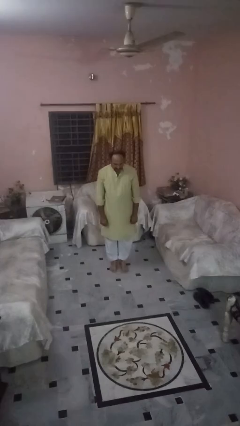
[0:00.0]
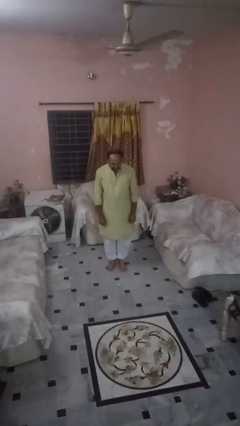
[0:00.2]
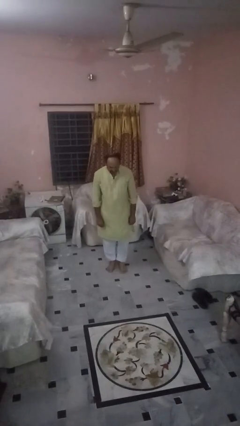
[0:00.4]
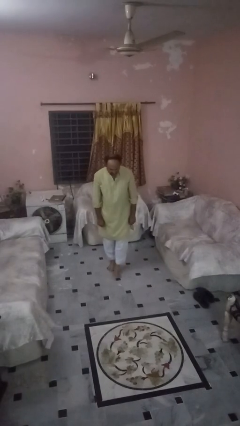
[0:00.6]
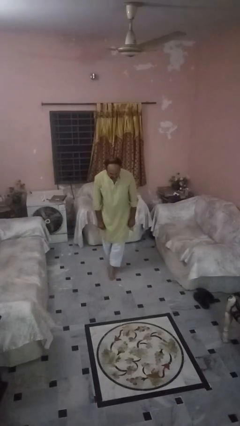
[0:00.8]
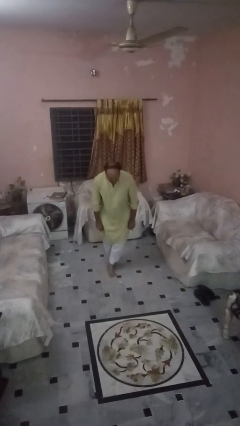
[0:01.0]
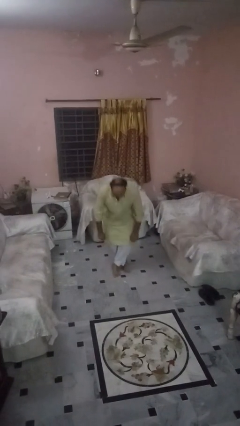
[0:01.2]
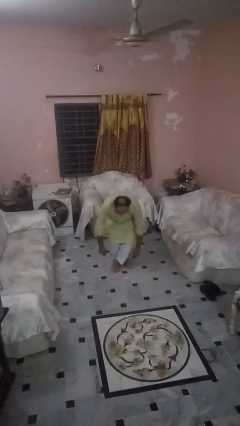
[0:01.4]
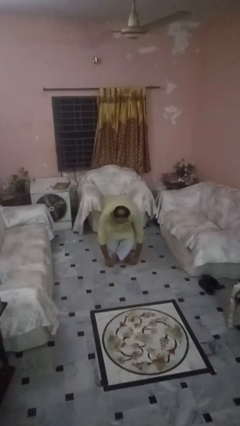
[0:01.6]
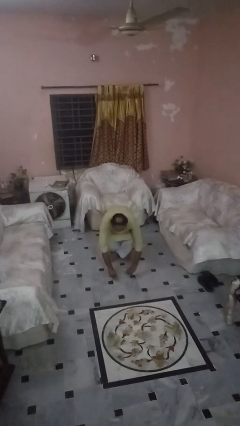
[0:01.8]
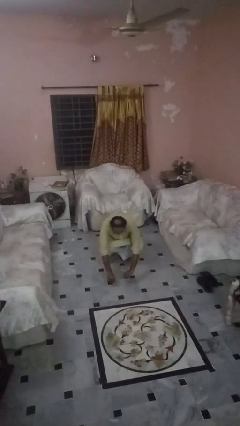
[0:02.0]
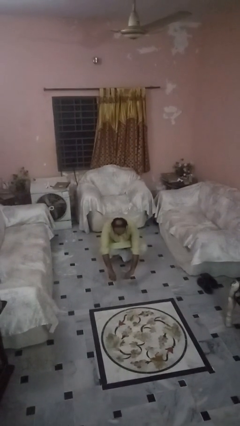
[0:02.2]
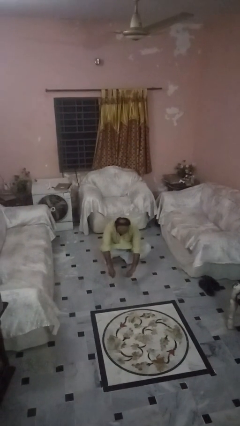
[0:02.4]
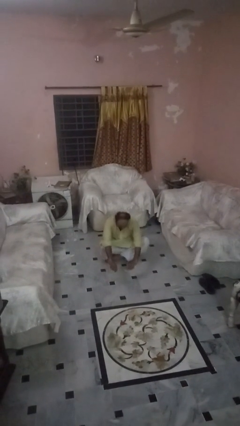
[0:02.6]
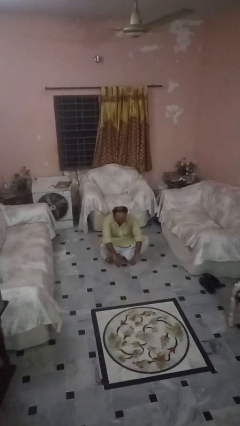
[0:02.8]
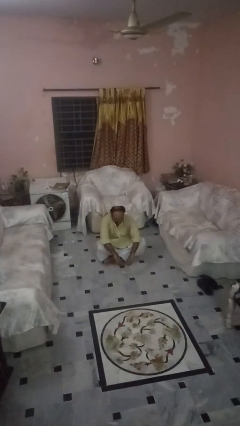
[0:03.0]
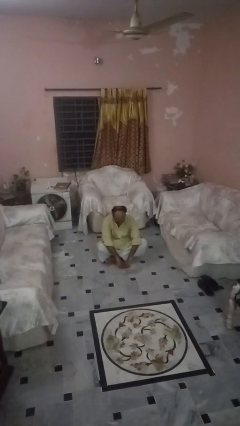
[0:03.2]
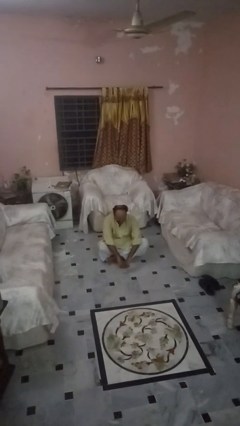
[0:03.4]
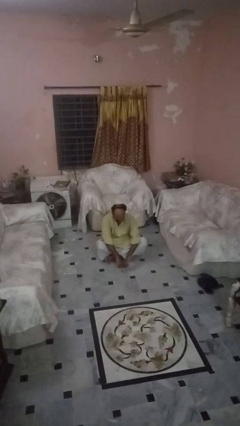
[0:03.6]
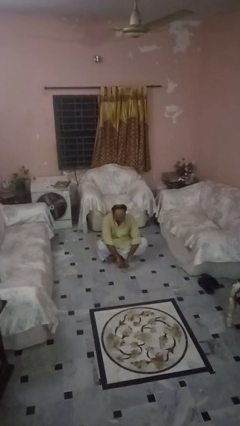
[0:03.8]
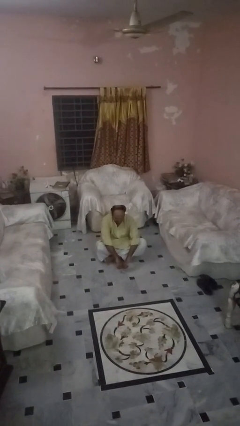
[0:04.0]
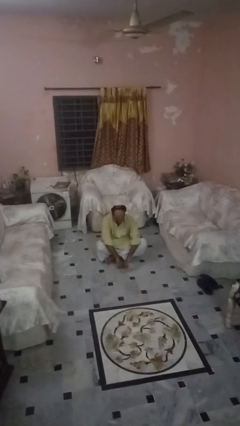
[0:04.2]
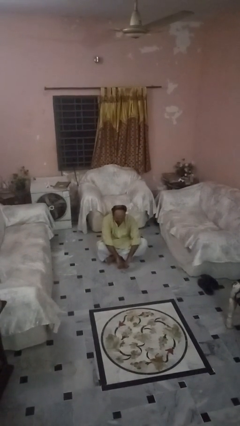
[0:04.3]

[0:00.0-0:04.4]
person sits crisscross

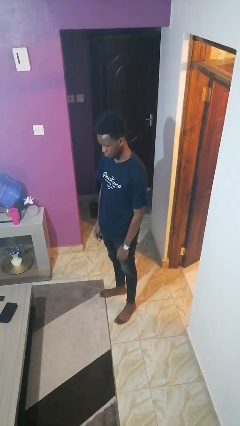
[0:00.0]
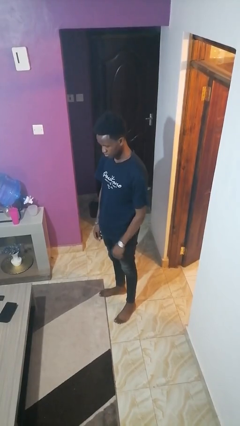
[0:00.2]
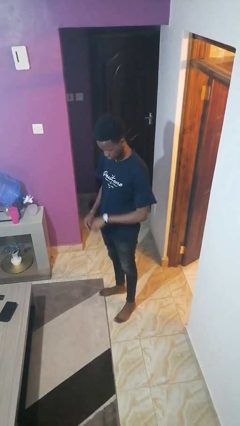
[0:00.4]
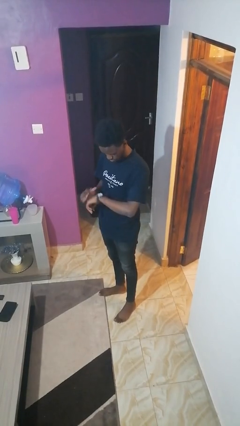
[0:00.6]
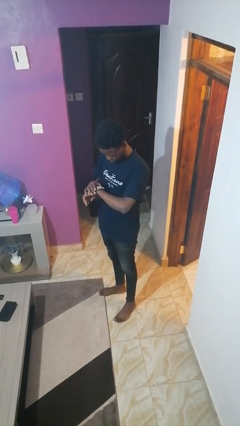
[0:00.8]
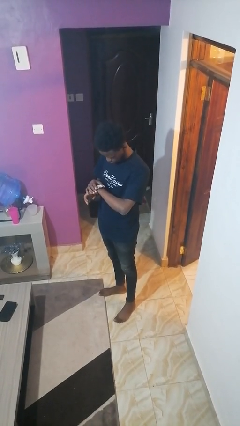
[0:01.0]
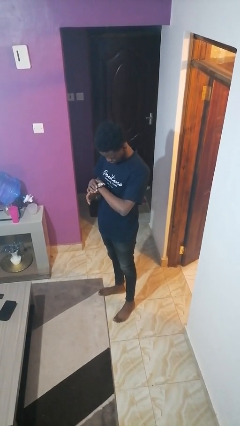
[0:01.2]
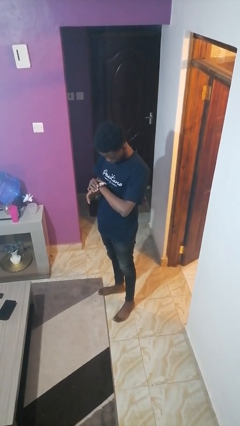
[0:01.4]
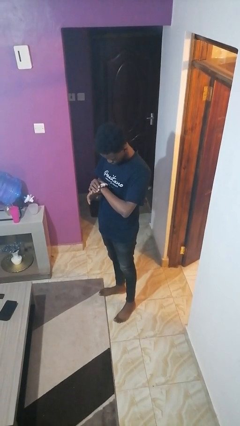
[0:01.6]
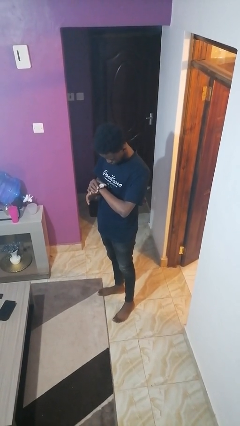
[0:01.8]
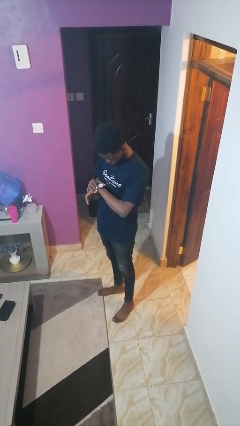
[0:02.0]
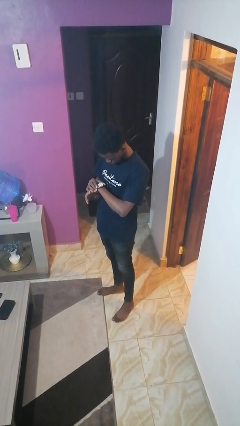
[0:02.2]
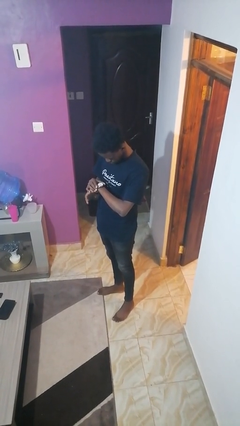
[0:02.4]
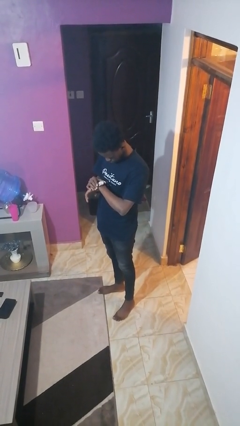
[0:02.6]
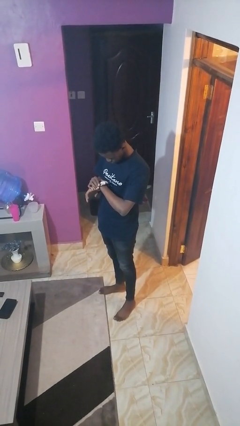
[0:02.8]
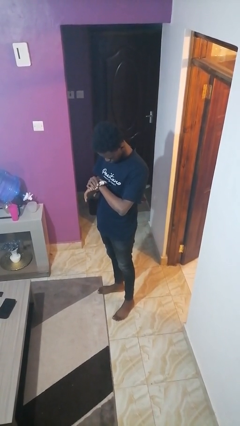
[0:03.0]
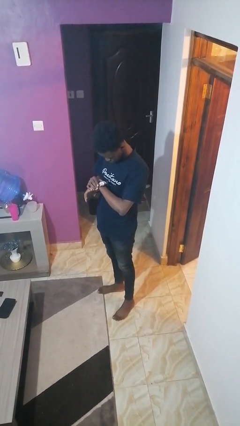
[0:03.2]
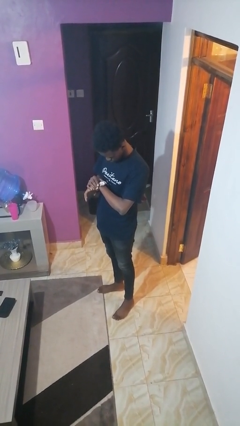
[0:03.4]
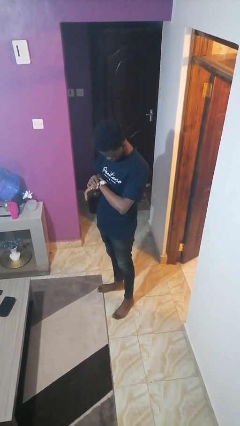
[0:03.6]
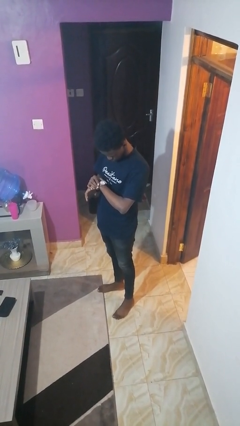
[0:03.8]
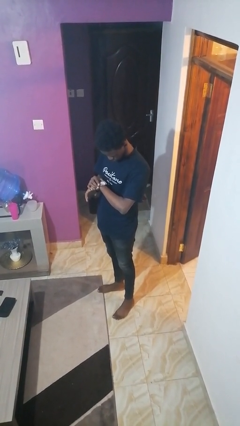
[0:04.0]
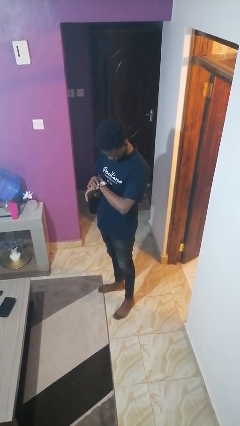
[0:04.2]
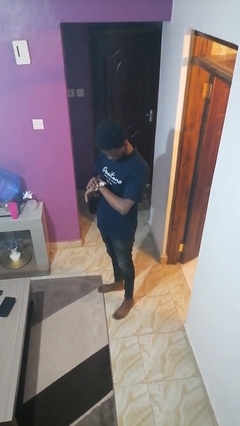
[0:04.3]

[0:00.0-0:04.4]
person looks at wristwatch

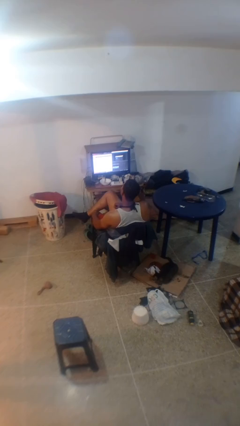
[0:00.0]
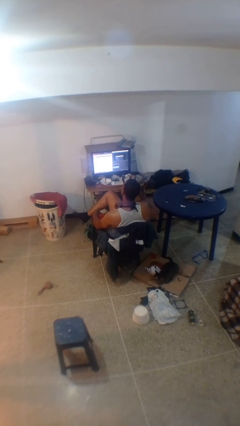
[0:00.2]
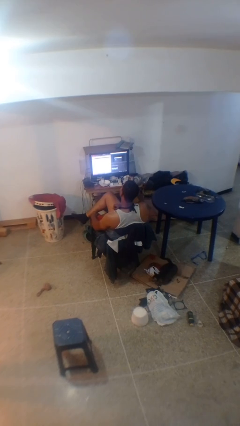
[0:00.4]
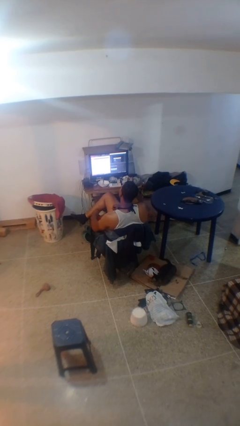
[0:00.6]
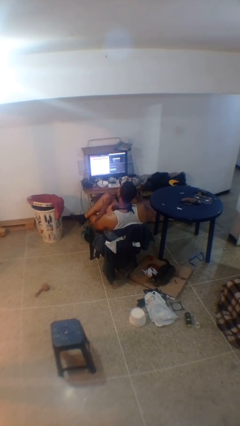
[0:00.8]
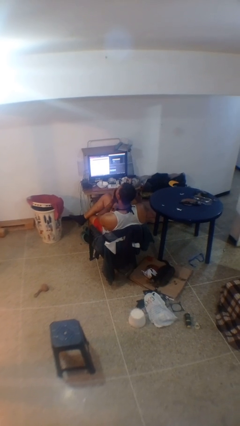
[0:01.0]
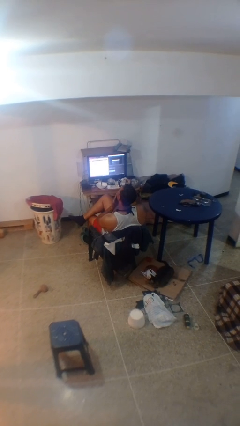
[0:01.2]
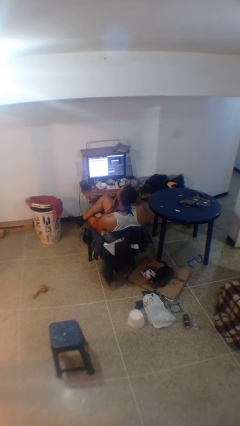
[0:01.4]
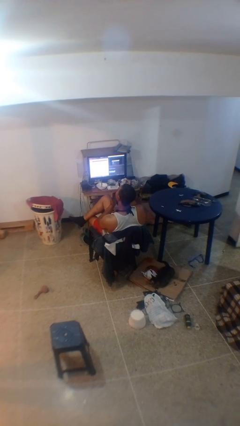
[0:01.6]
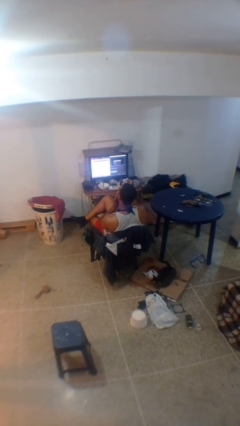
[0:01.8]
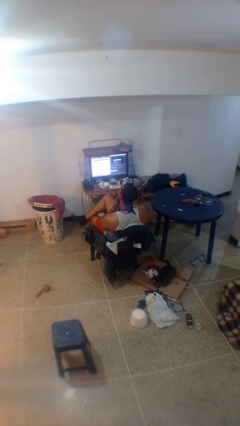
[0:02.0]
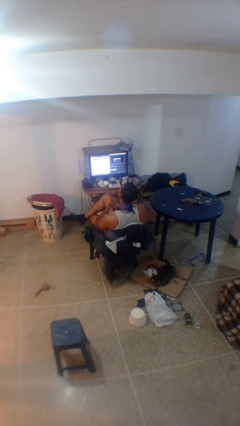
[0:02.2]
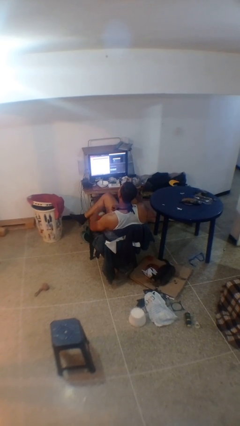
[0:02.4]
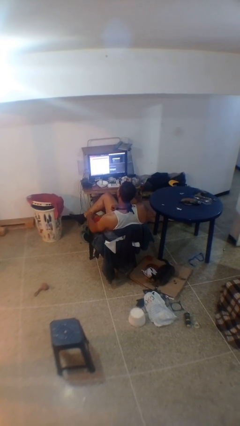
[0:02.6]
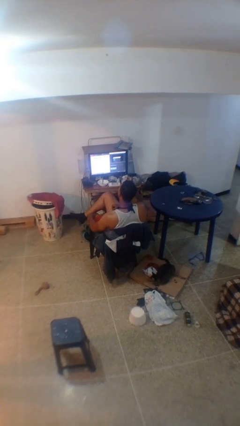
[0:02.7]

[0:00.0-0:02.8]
person strokes chin

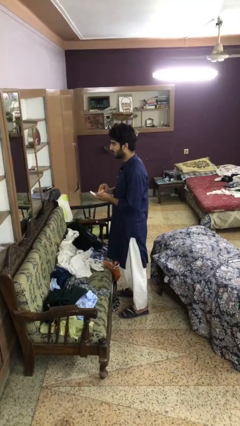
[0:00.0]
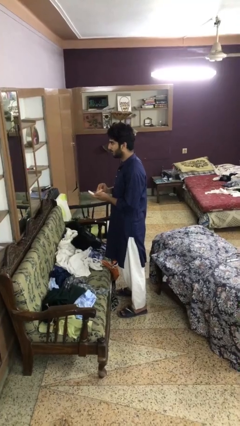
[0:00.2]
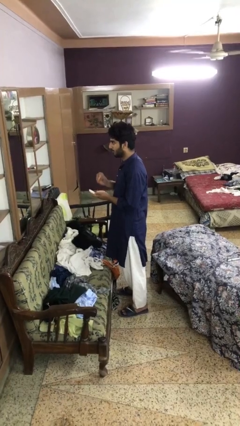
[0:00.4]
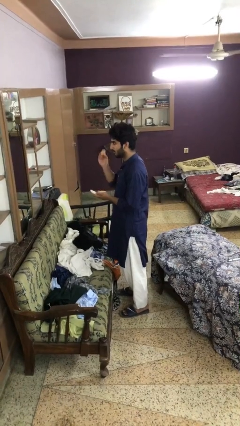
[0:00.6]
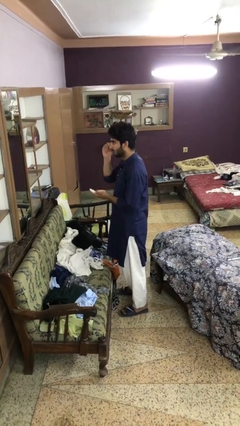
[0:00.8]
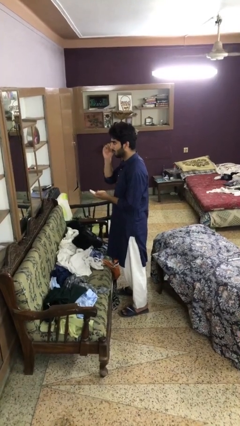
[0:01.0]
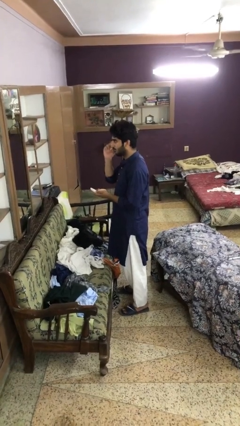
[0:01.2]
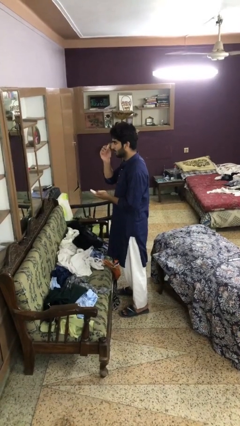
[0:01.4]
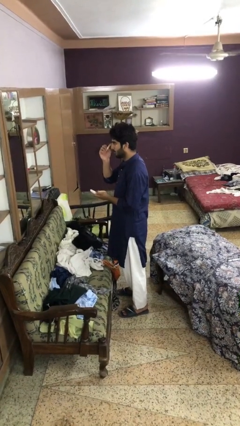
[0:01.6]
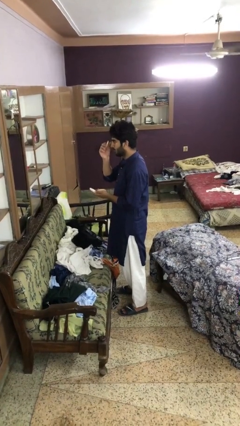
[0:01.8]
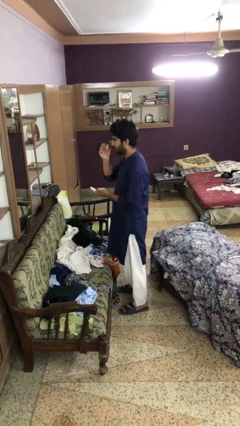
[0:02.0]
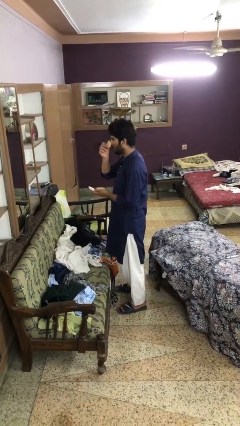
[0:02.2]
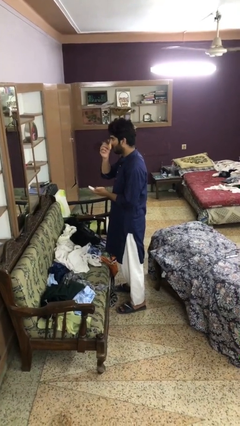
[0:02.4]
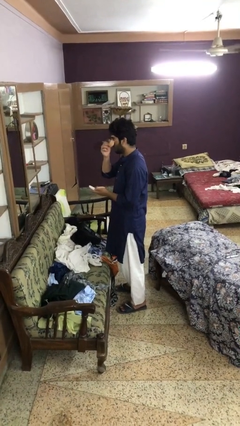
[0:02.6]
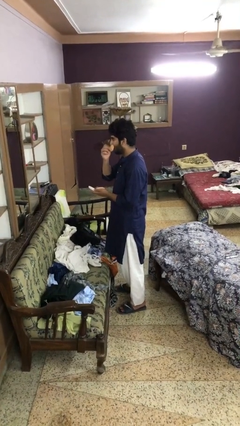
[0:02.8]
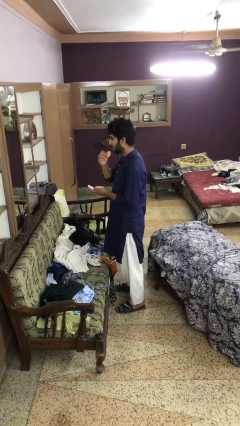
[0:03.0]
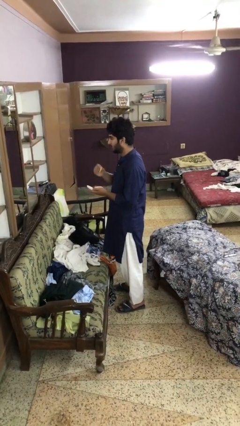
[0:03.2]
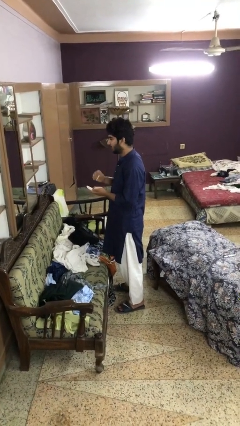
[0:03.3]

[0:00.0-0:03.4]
person applies foundation makeup

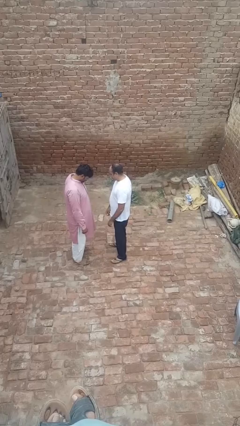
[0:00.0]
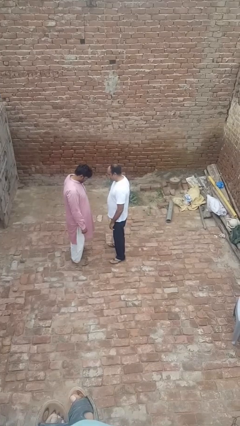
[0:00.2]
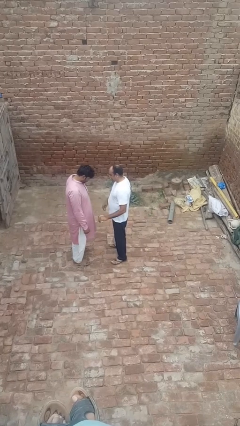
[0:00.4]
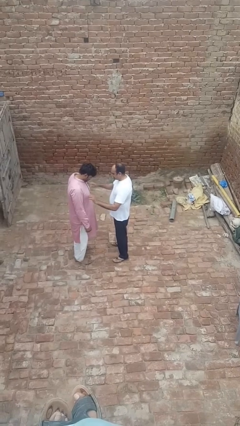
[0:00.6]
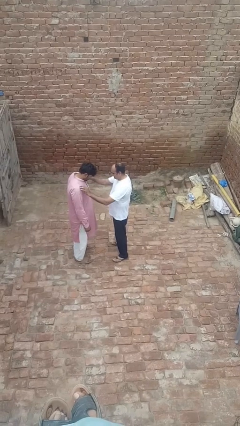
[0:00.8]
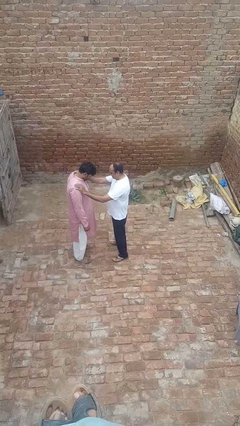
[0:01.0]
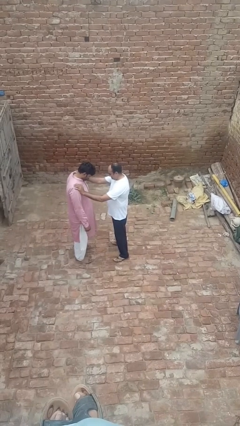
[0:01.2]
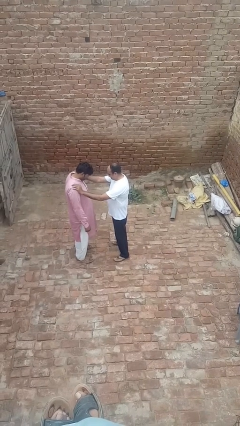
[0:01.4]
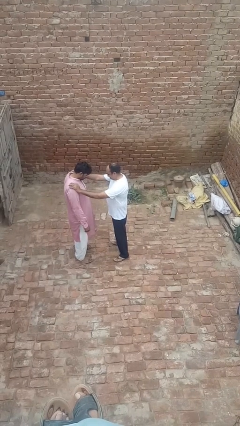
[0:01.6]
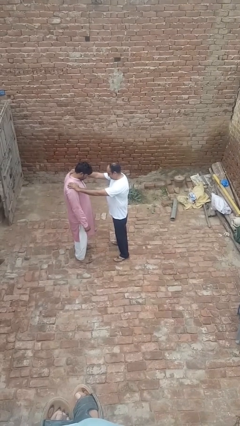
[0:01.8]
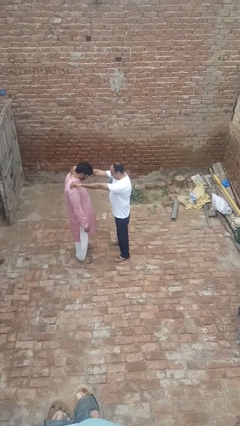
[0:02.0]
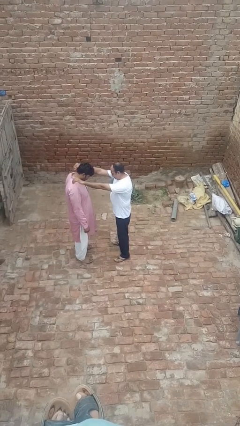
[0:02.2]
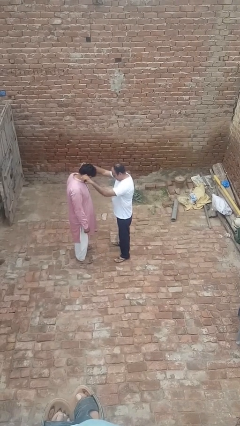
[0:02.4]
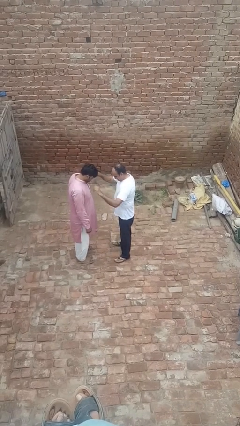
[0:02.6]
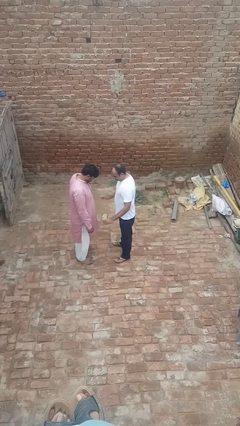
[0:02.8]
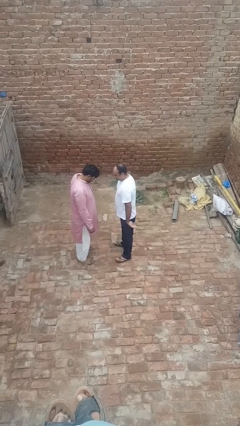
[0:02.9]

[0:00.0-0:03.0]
person shoves person
